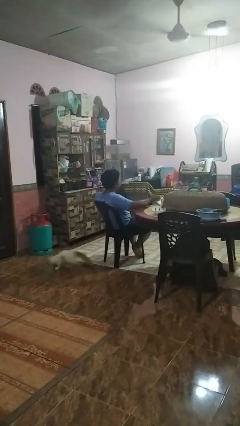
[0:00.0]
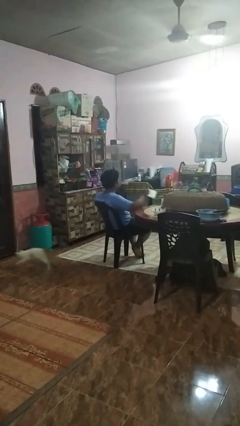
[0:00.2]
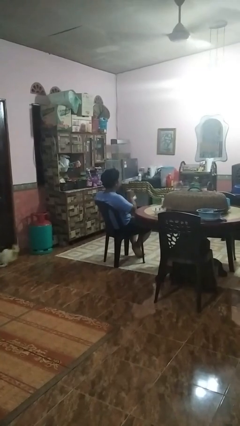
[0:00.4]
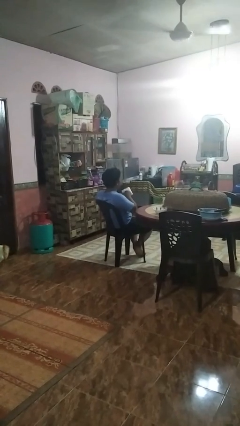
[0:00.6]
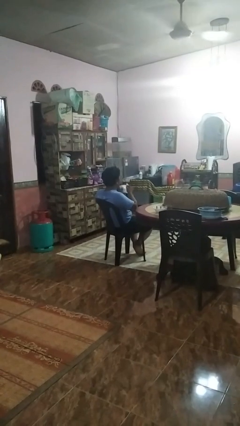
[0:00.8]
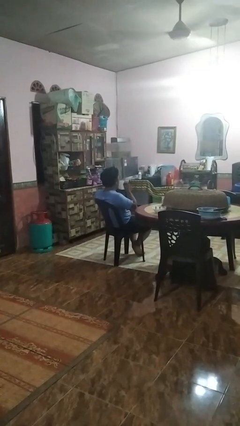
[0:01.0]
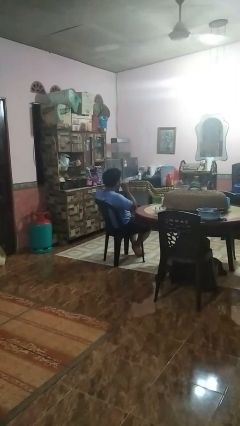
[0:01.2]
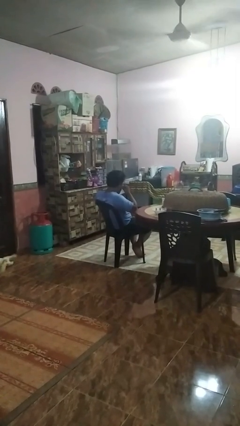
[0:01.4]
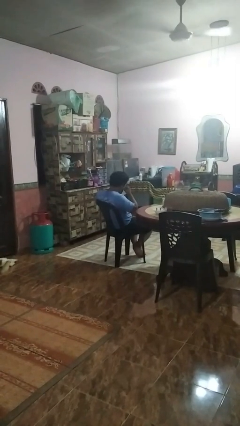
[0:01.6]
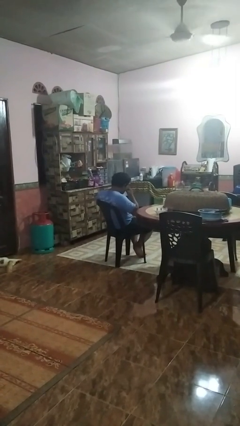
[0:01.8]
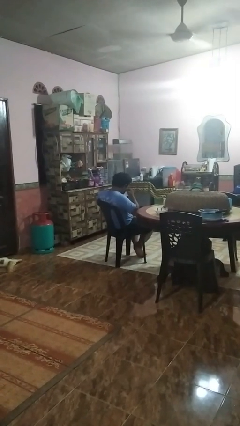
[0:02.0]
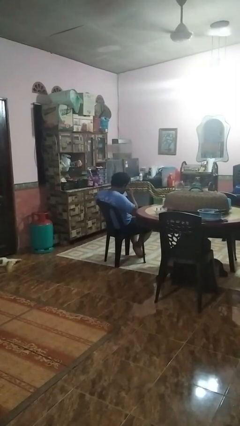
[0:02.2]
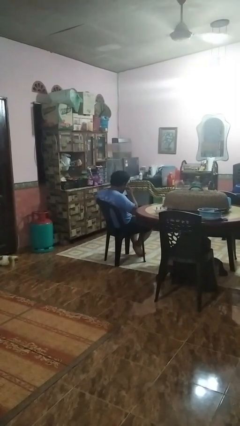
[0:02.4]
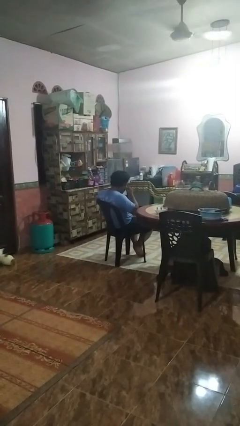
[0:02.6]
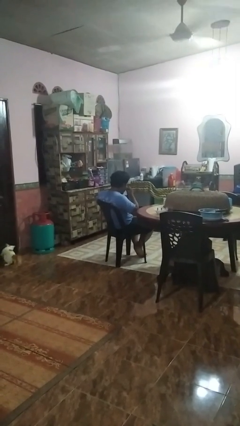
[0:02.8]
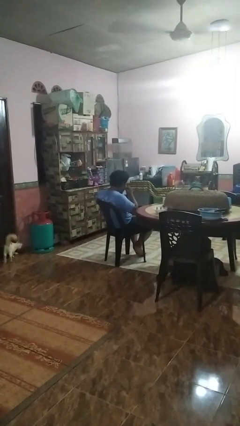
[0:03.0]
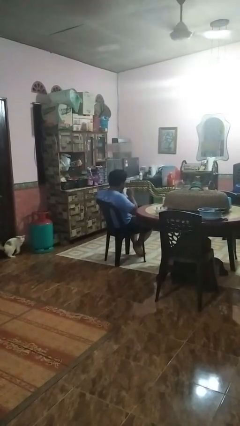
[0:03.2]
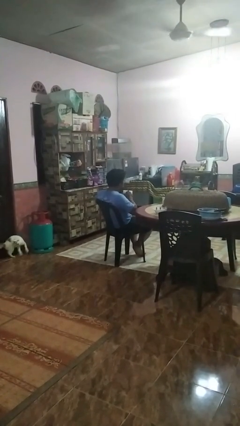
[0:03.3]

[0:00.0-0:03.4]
person blows nose

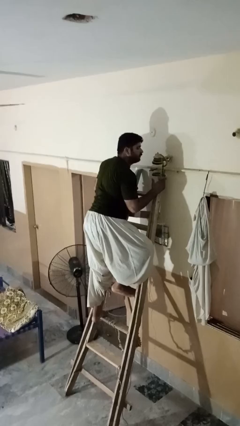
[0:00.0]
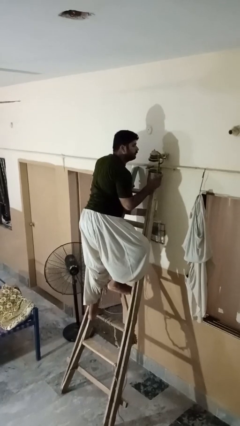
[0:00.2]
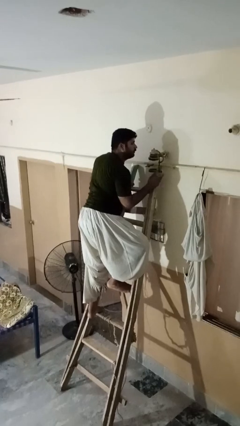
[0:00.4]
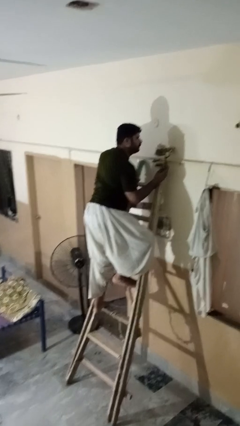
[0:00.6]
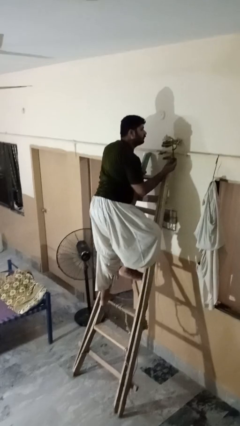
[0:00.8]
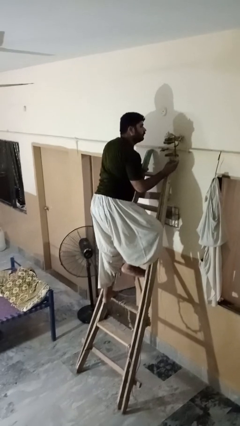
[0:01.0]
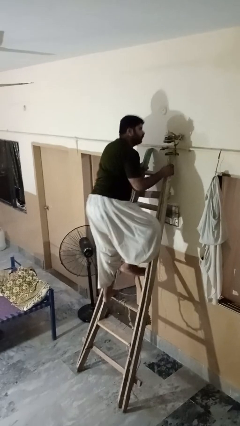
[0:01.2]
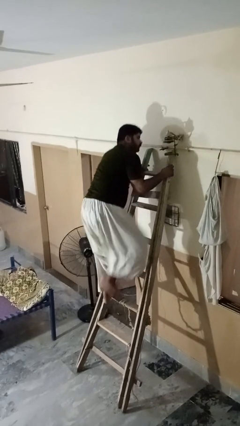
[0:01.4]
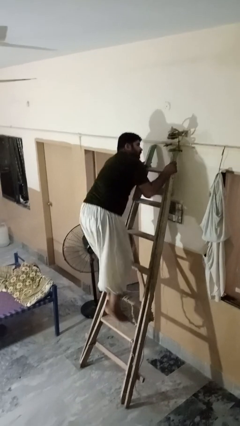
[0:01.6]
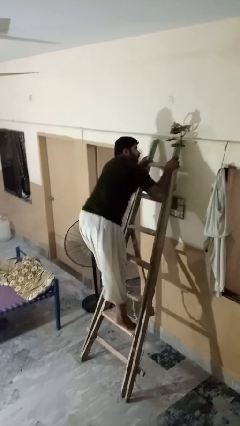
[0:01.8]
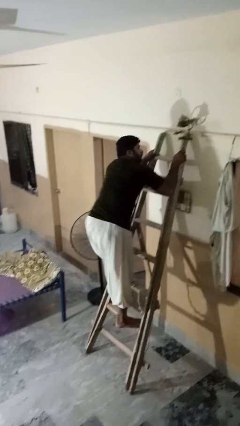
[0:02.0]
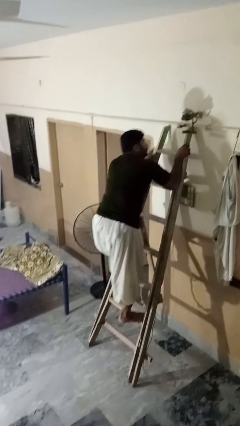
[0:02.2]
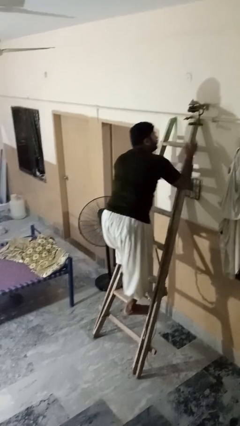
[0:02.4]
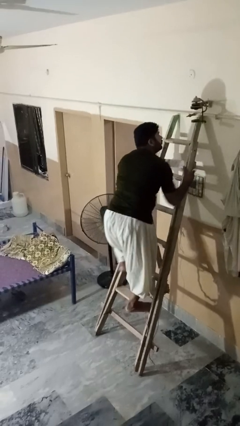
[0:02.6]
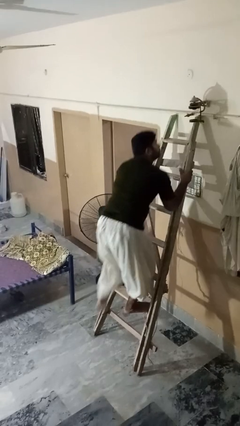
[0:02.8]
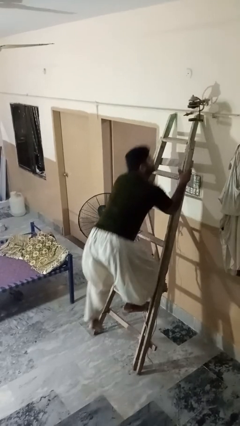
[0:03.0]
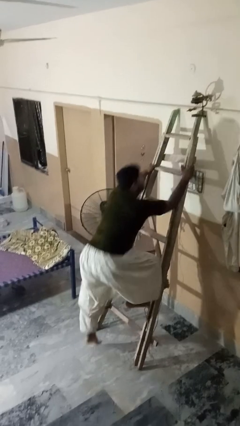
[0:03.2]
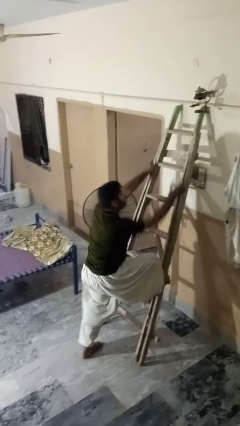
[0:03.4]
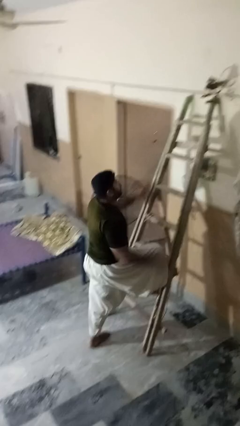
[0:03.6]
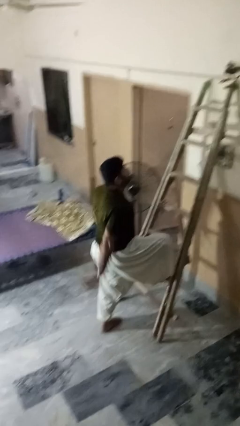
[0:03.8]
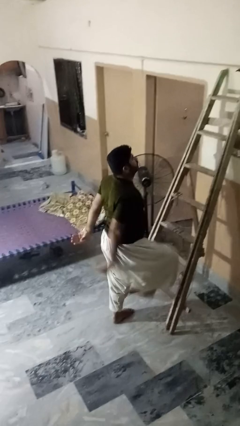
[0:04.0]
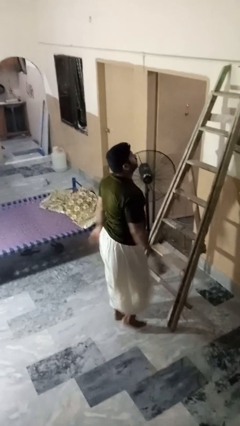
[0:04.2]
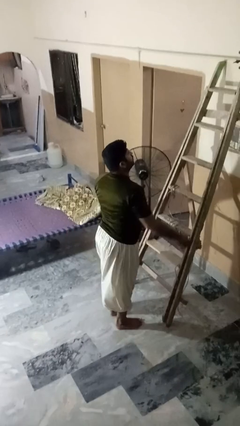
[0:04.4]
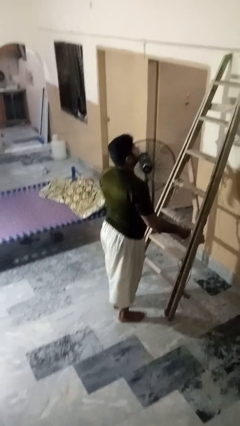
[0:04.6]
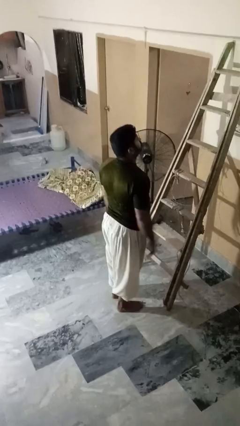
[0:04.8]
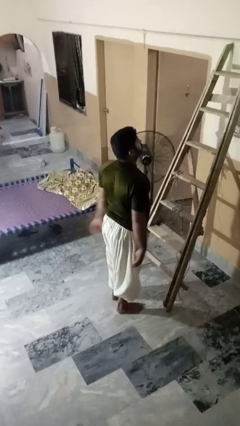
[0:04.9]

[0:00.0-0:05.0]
person climbs down ladder

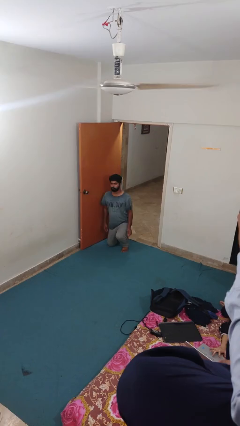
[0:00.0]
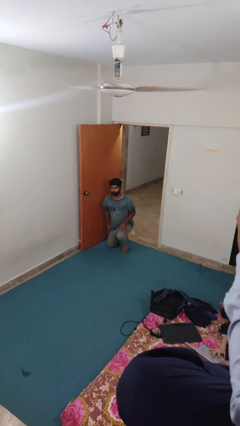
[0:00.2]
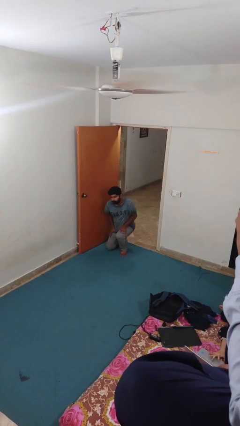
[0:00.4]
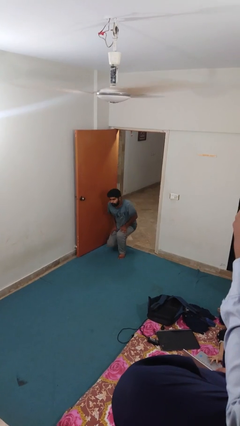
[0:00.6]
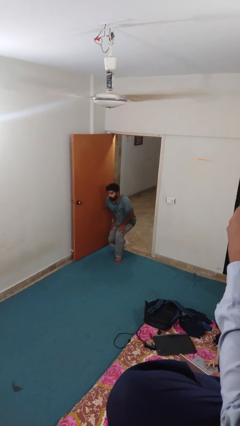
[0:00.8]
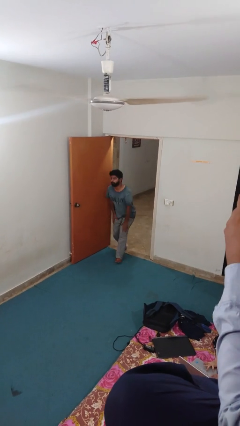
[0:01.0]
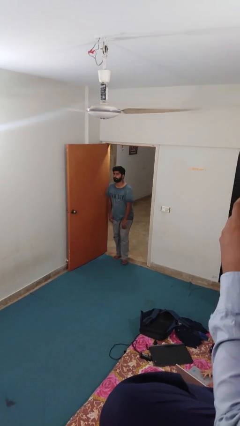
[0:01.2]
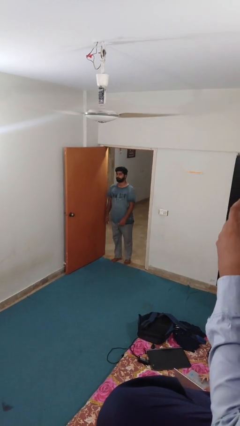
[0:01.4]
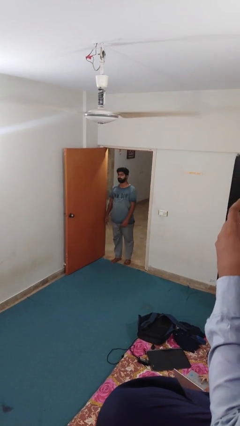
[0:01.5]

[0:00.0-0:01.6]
person stands up from floor

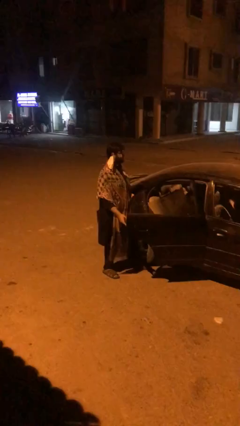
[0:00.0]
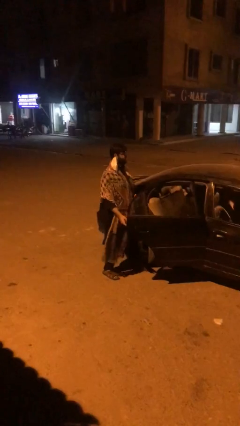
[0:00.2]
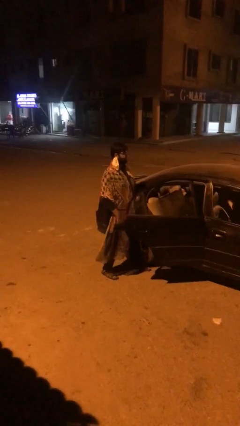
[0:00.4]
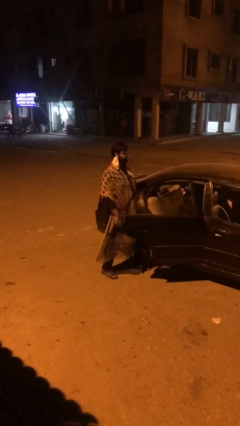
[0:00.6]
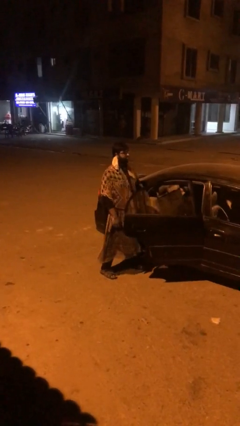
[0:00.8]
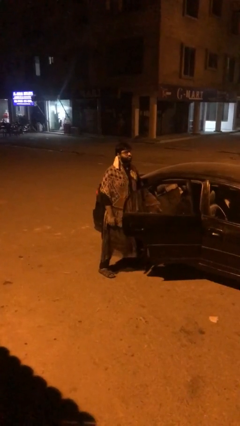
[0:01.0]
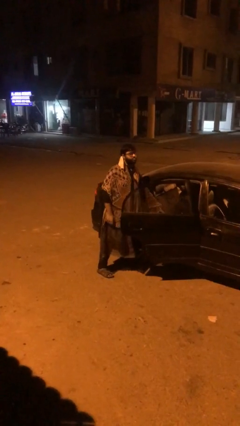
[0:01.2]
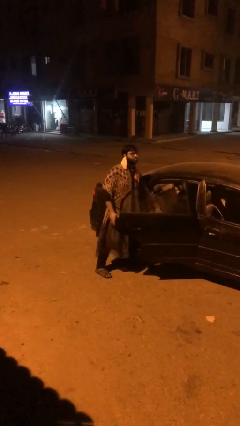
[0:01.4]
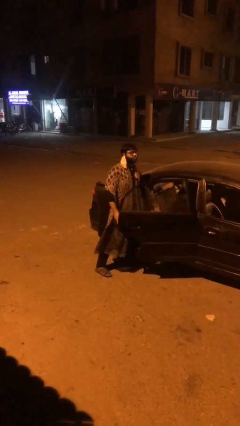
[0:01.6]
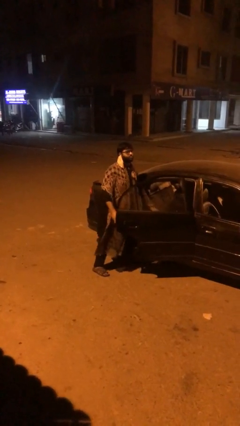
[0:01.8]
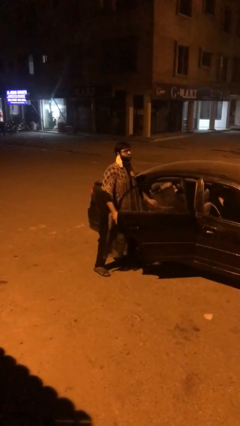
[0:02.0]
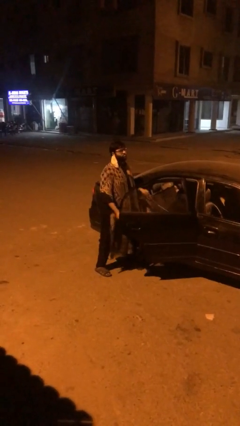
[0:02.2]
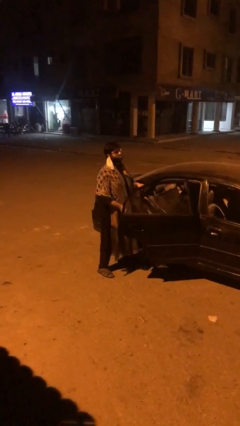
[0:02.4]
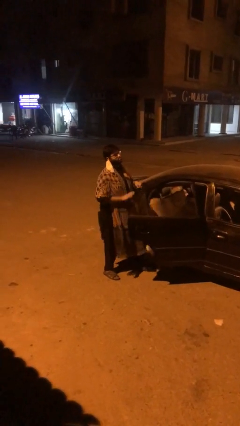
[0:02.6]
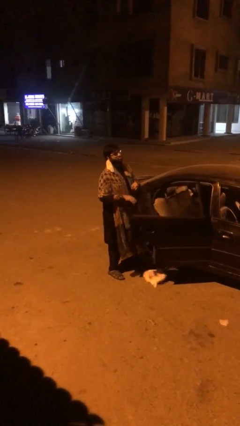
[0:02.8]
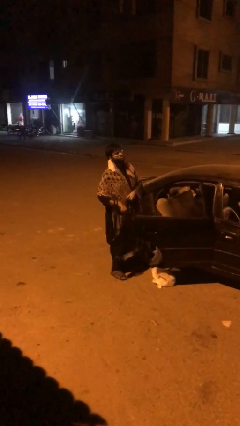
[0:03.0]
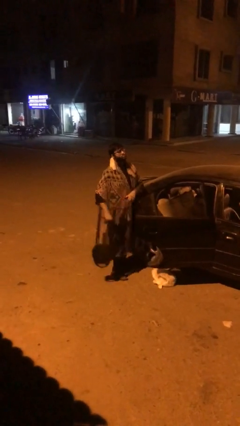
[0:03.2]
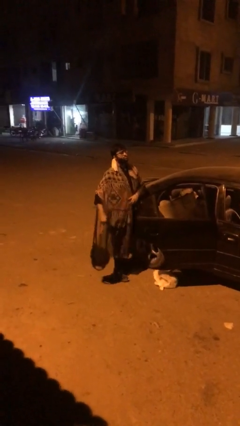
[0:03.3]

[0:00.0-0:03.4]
person unloads car

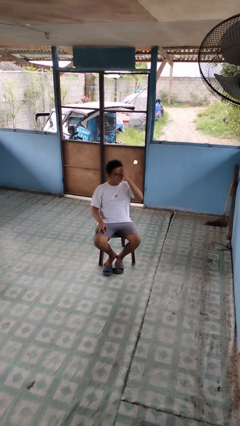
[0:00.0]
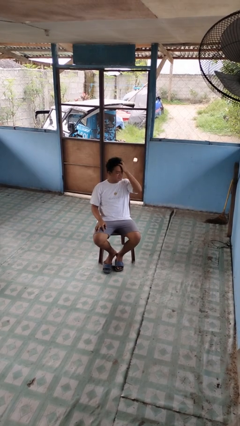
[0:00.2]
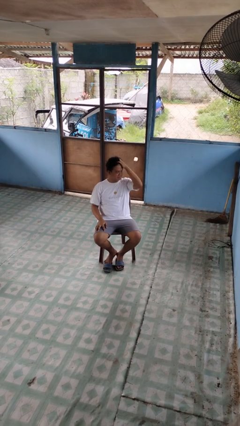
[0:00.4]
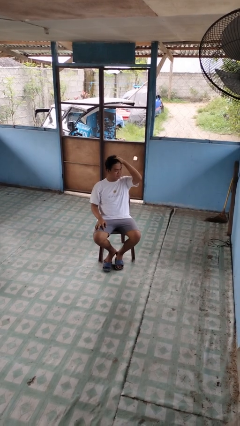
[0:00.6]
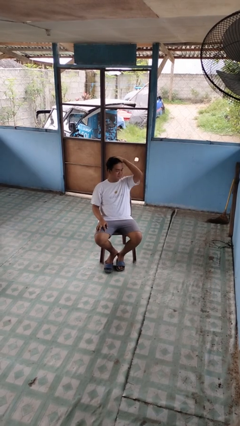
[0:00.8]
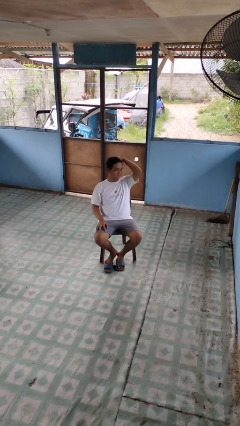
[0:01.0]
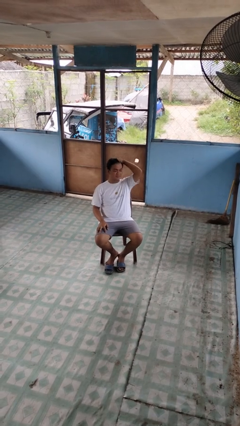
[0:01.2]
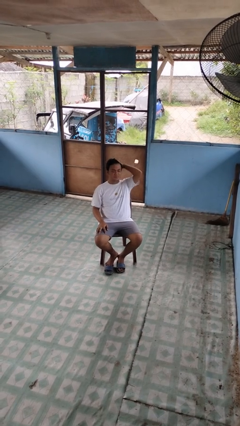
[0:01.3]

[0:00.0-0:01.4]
person strokes hair

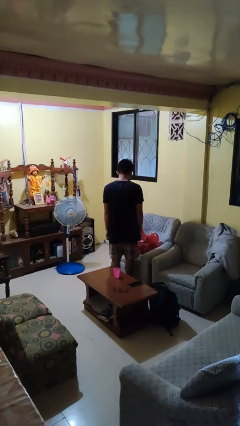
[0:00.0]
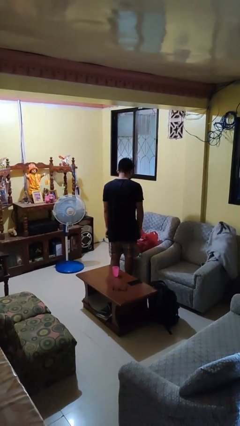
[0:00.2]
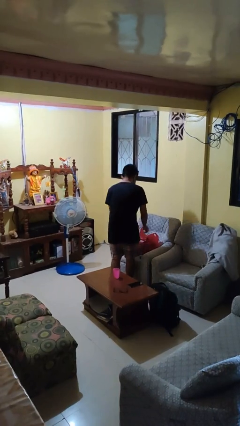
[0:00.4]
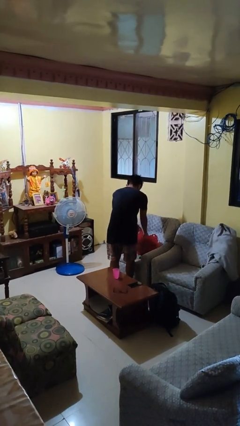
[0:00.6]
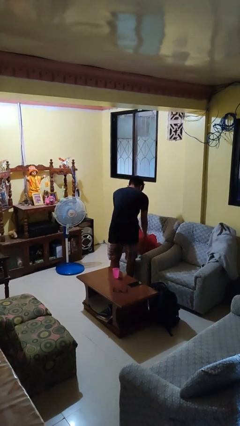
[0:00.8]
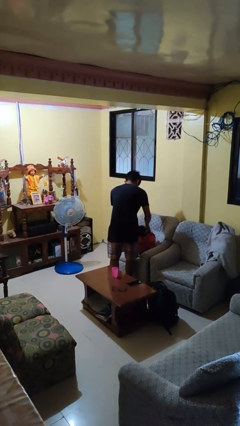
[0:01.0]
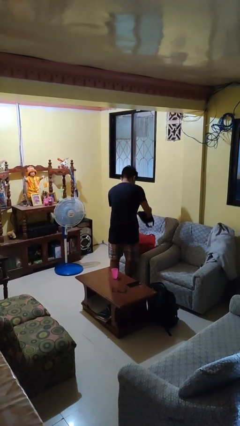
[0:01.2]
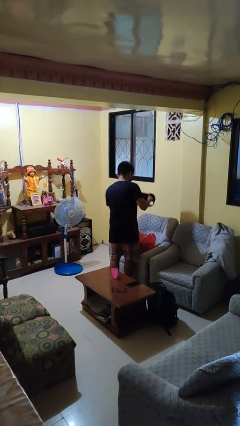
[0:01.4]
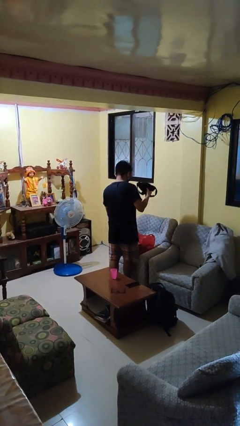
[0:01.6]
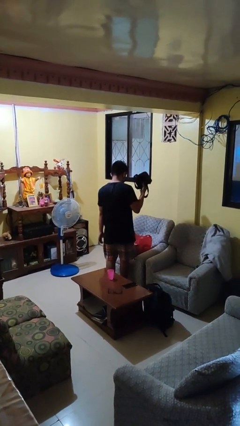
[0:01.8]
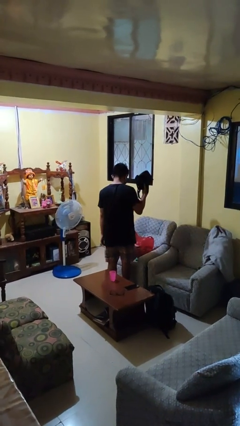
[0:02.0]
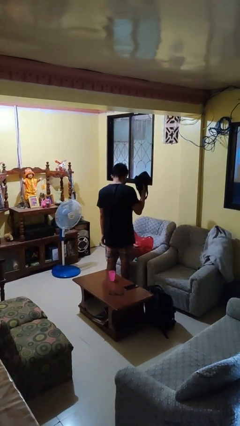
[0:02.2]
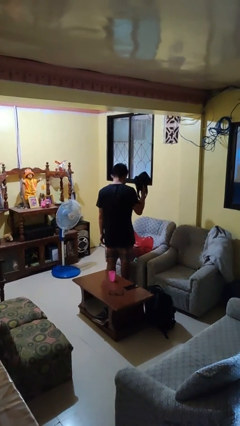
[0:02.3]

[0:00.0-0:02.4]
person takes object from bag
